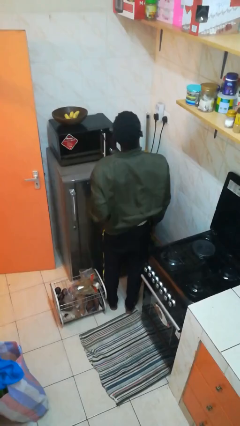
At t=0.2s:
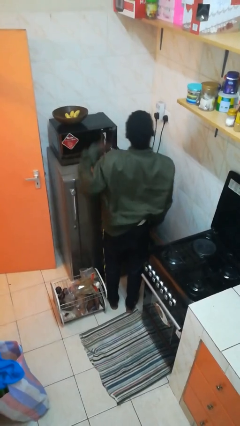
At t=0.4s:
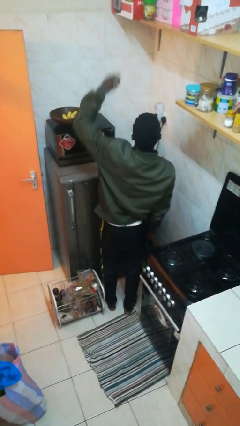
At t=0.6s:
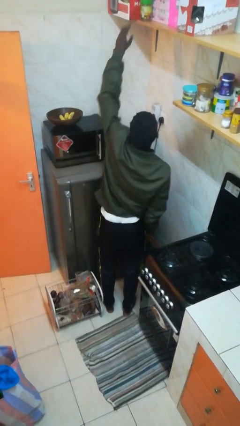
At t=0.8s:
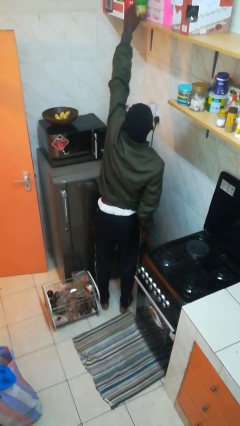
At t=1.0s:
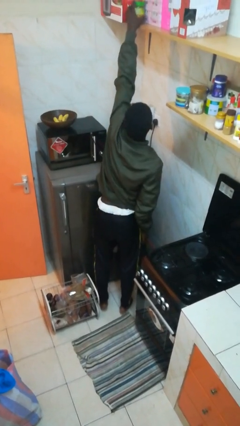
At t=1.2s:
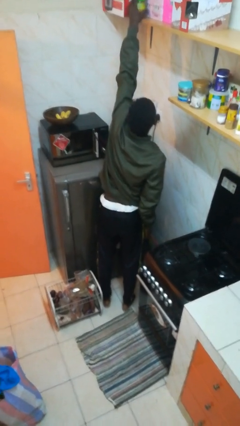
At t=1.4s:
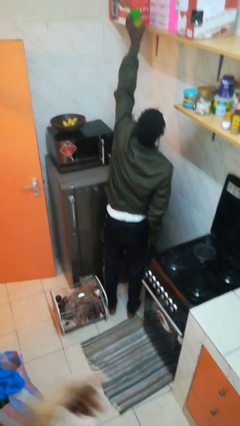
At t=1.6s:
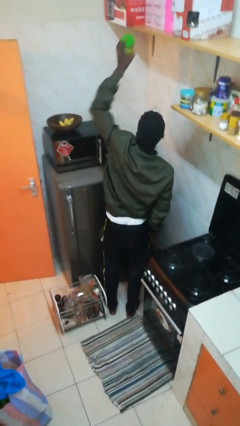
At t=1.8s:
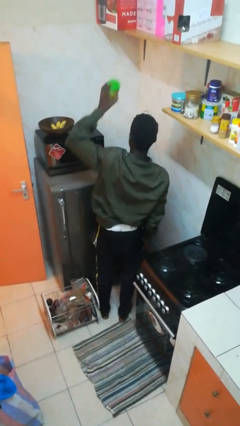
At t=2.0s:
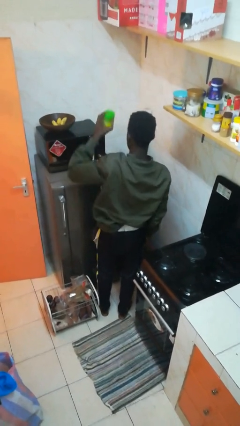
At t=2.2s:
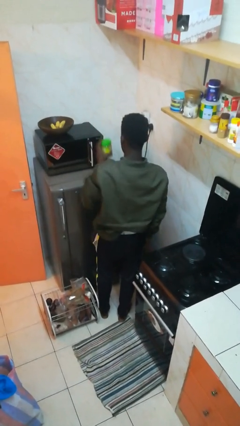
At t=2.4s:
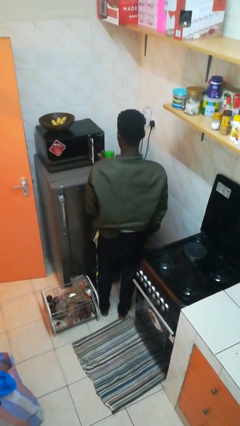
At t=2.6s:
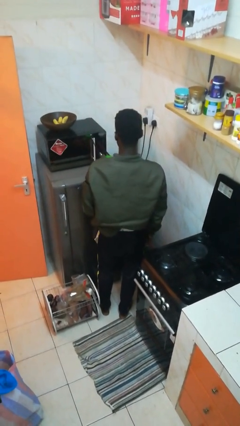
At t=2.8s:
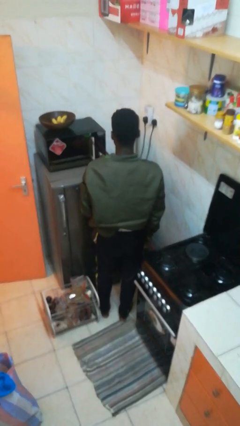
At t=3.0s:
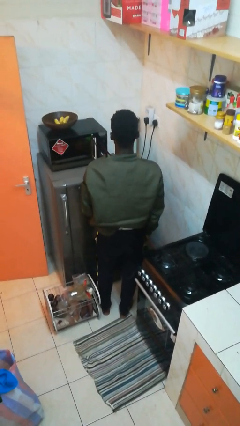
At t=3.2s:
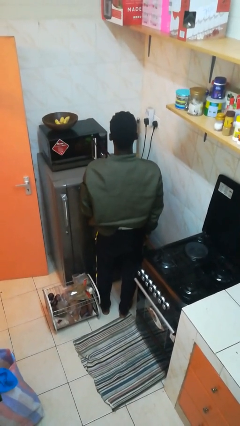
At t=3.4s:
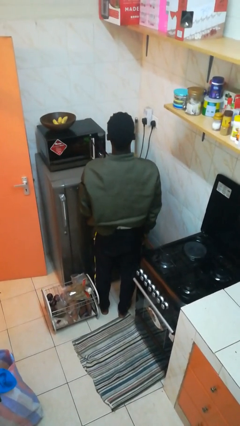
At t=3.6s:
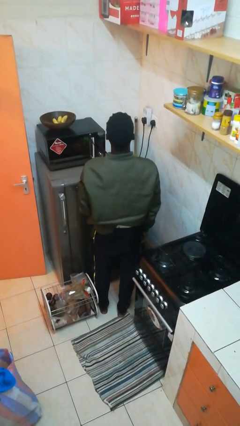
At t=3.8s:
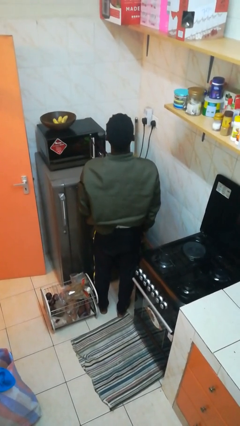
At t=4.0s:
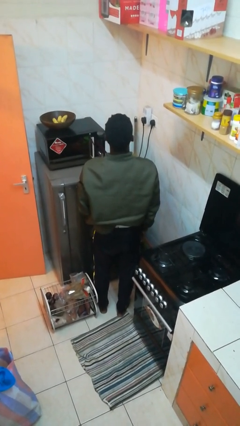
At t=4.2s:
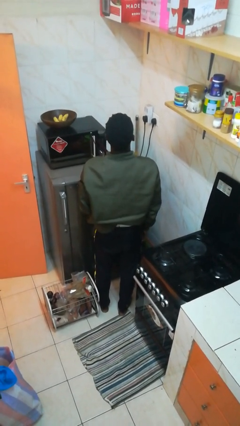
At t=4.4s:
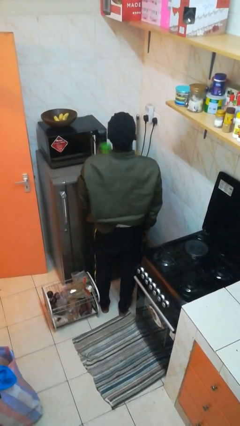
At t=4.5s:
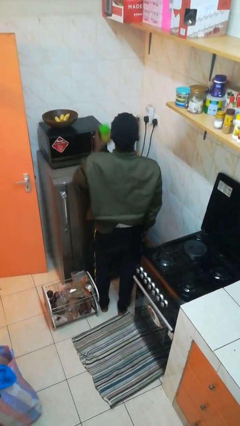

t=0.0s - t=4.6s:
person picks up object from shelf

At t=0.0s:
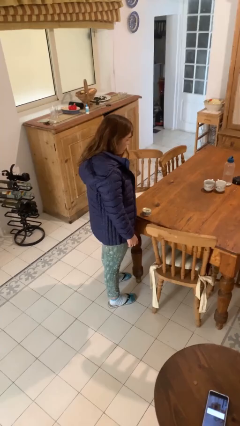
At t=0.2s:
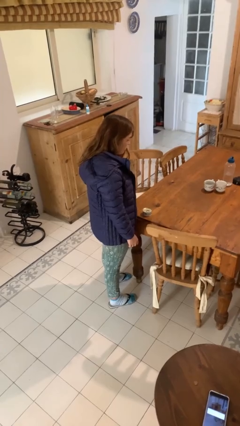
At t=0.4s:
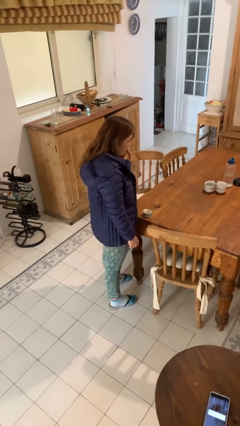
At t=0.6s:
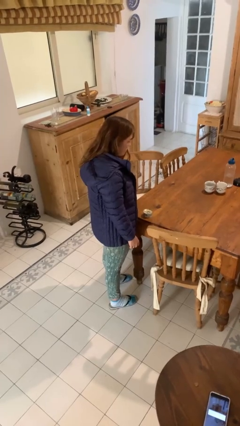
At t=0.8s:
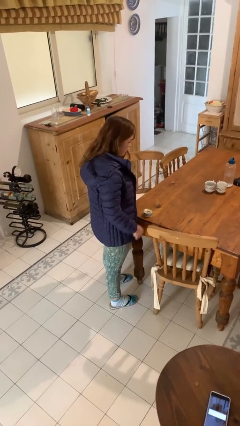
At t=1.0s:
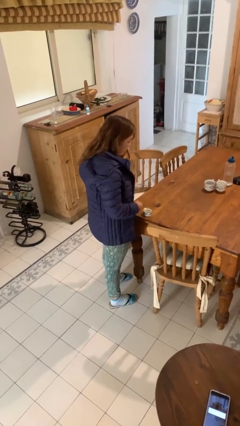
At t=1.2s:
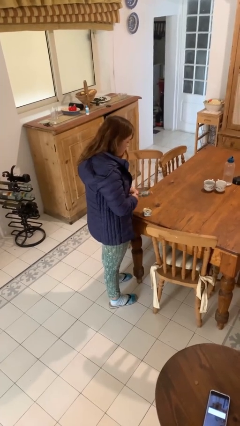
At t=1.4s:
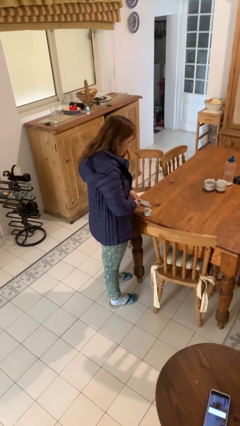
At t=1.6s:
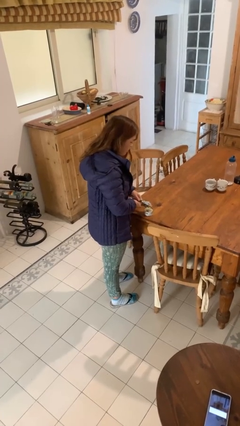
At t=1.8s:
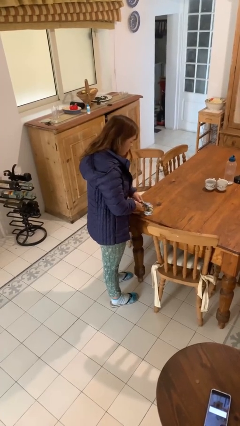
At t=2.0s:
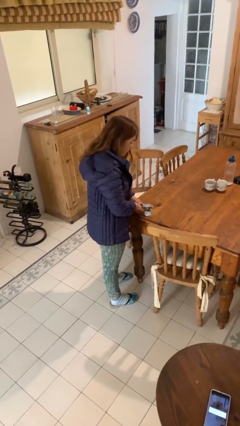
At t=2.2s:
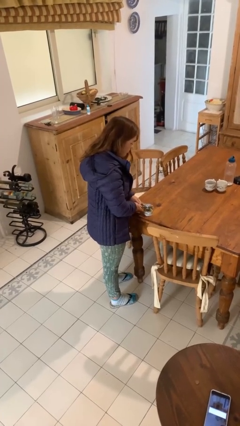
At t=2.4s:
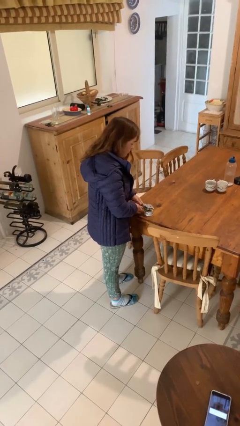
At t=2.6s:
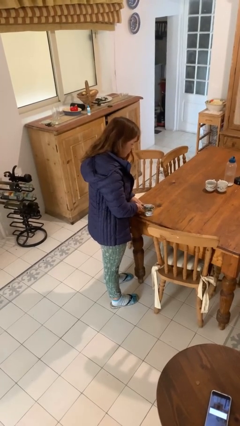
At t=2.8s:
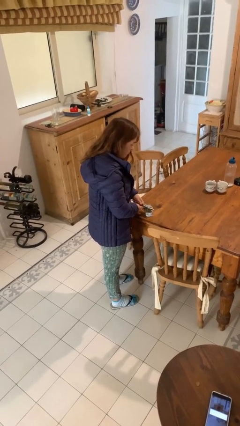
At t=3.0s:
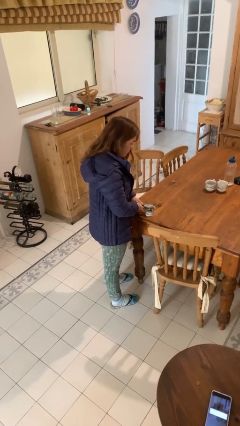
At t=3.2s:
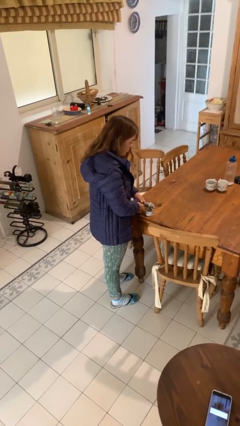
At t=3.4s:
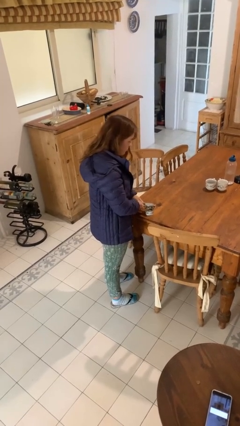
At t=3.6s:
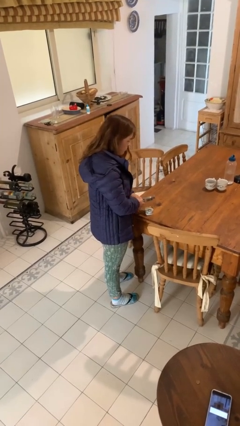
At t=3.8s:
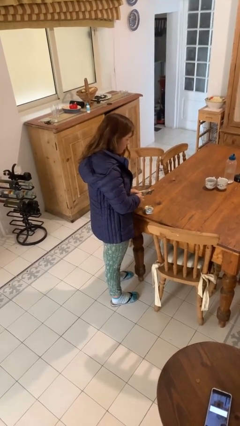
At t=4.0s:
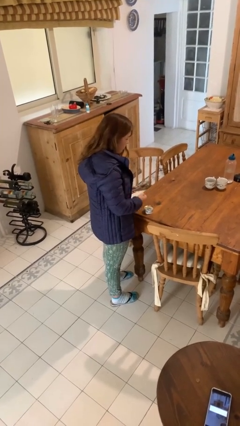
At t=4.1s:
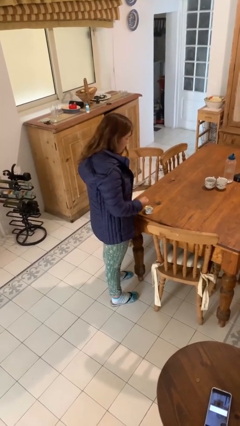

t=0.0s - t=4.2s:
person opens can with can opener

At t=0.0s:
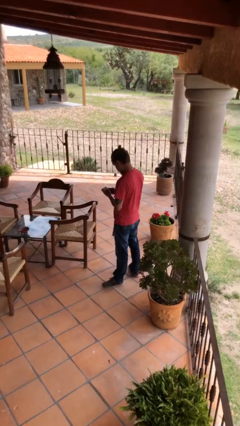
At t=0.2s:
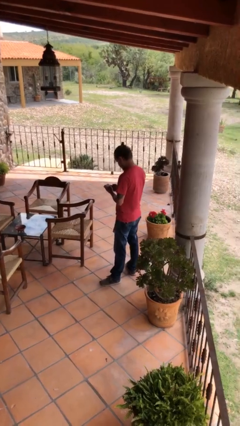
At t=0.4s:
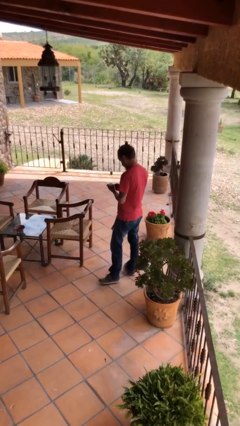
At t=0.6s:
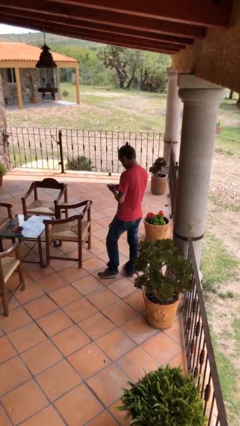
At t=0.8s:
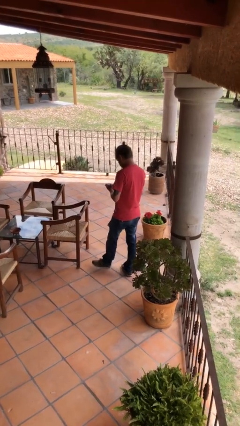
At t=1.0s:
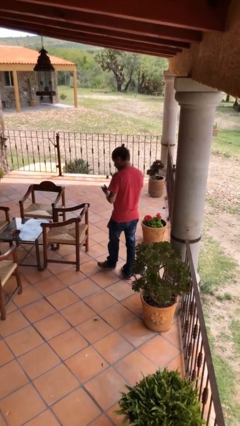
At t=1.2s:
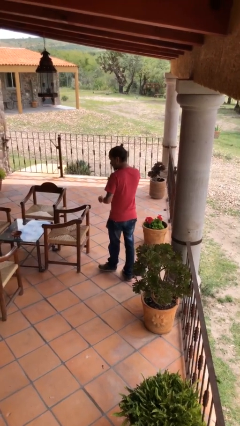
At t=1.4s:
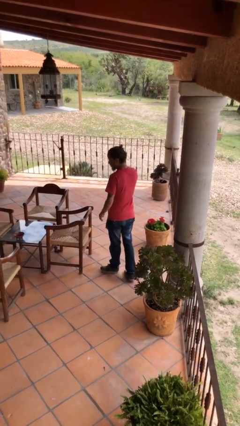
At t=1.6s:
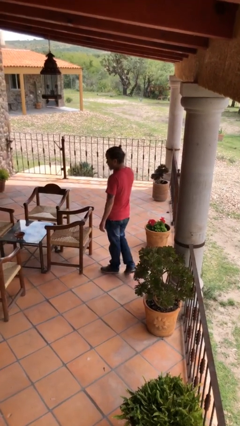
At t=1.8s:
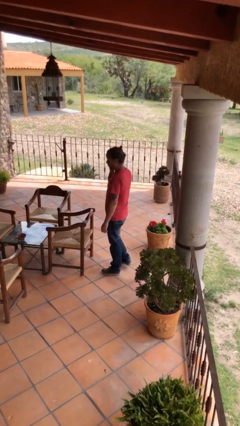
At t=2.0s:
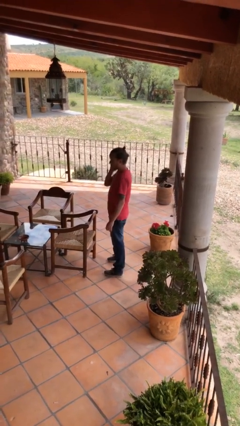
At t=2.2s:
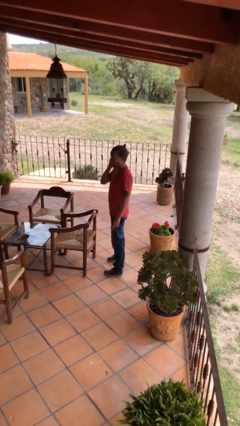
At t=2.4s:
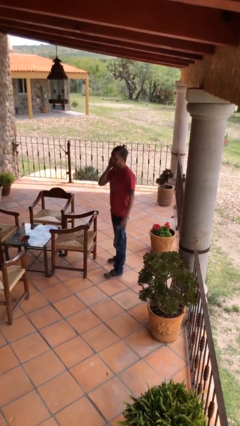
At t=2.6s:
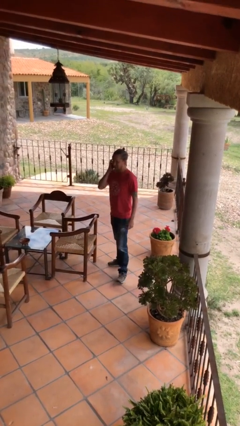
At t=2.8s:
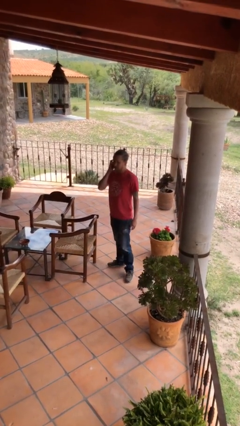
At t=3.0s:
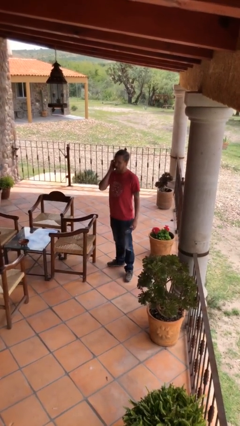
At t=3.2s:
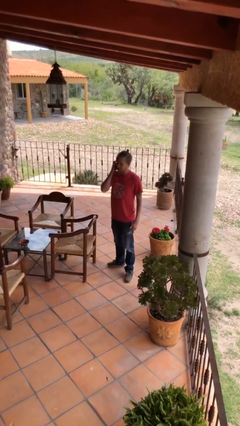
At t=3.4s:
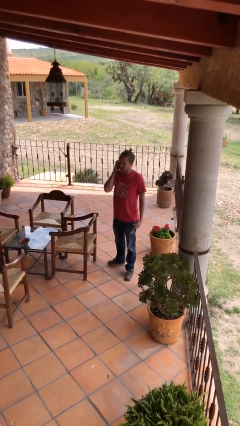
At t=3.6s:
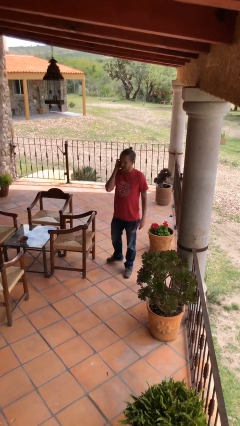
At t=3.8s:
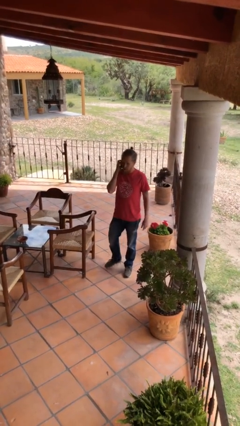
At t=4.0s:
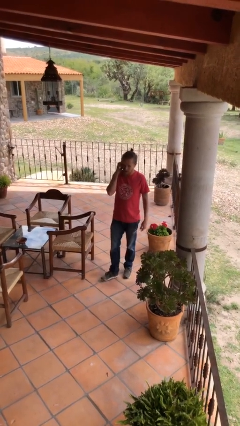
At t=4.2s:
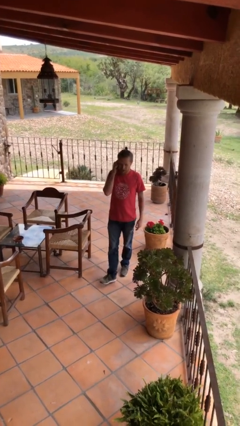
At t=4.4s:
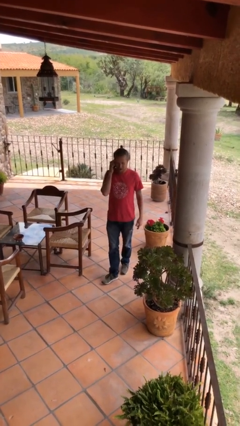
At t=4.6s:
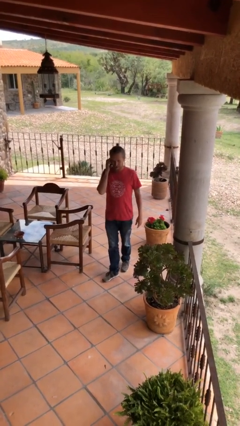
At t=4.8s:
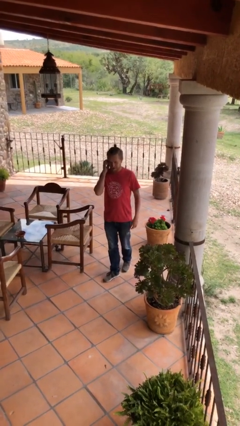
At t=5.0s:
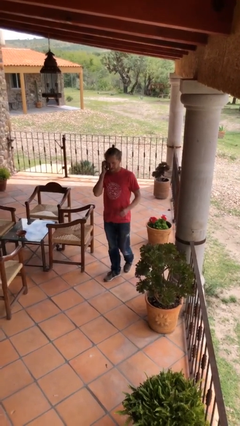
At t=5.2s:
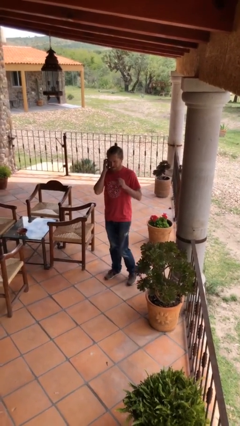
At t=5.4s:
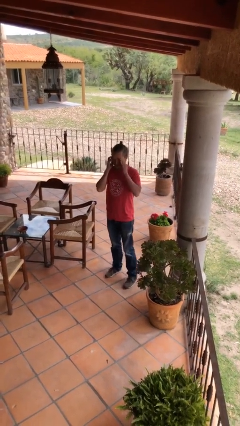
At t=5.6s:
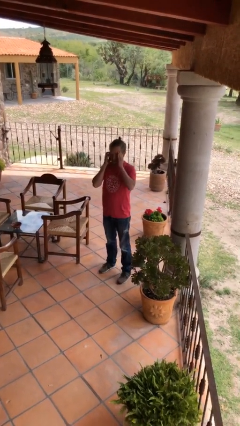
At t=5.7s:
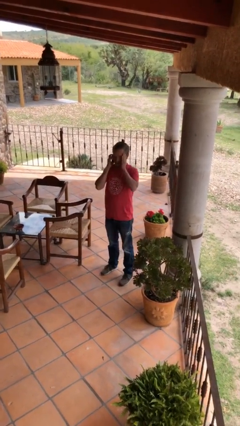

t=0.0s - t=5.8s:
person talks on phone

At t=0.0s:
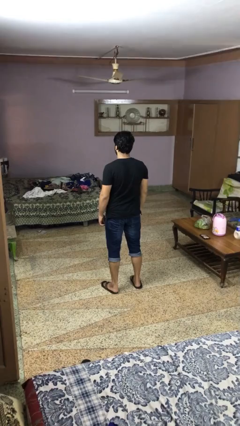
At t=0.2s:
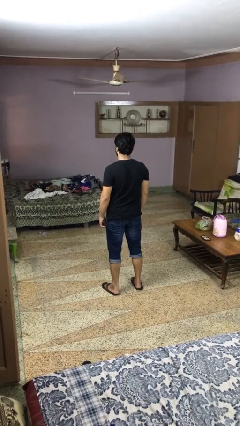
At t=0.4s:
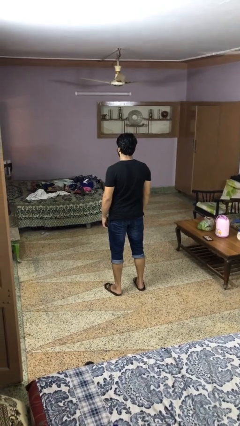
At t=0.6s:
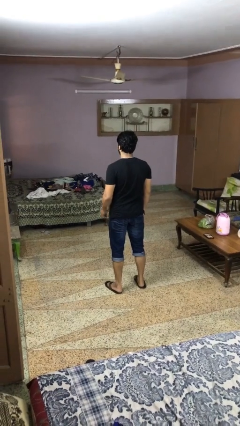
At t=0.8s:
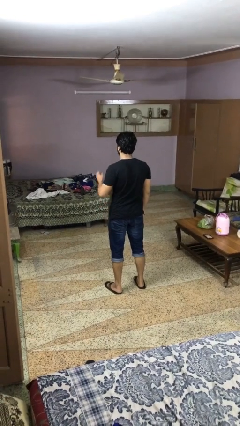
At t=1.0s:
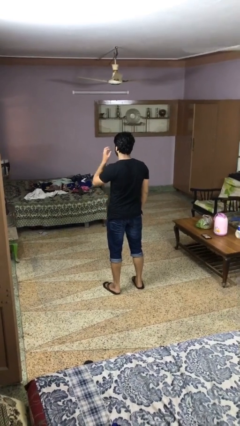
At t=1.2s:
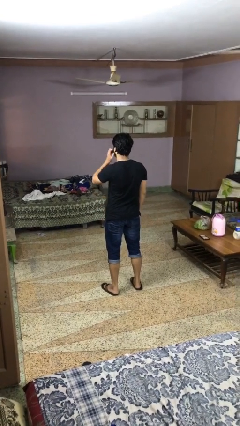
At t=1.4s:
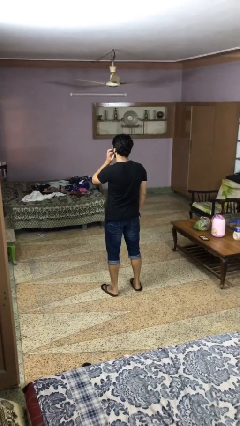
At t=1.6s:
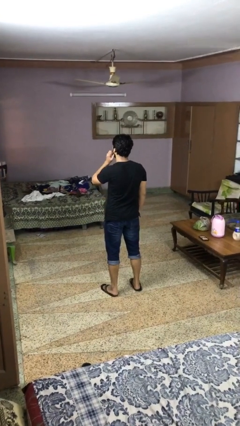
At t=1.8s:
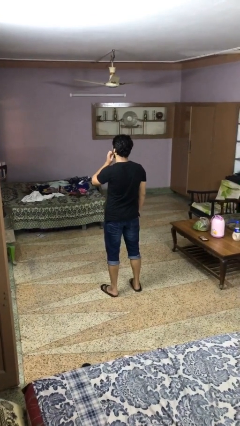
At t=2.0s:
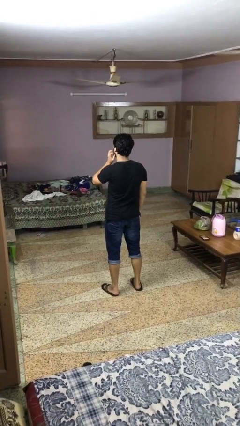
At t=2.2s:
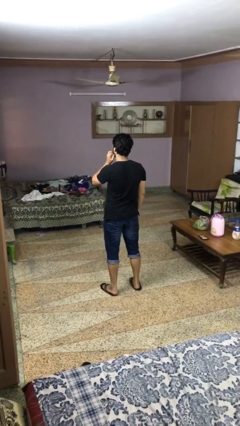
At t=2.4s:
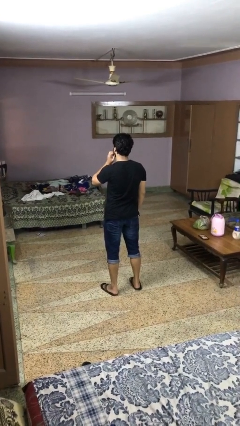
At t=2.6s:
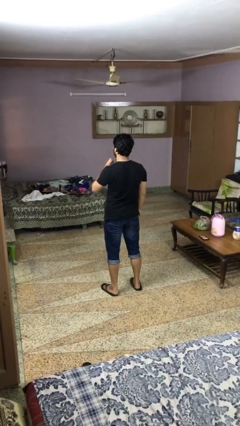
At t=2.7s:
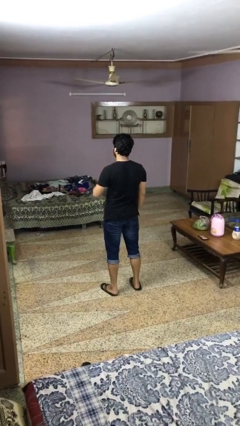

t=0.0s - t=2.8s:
person scratches face
